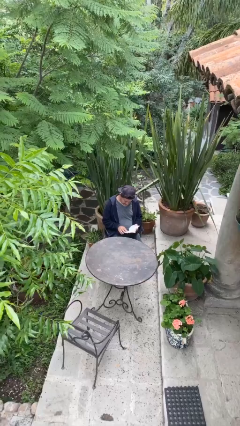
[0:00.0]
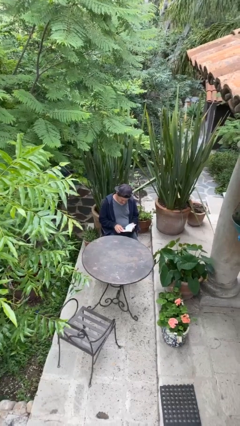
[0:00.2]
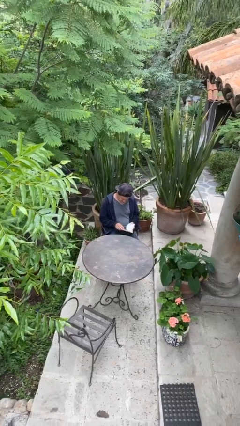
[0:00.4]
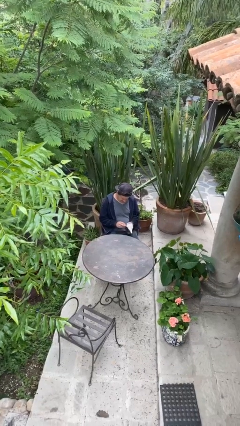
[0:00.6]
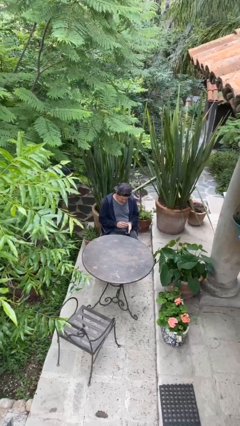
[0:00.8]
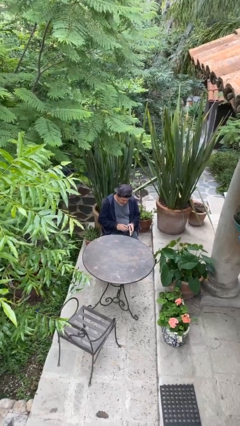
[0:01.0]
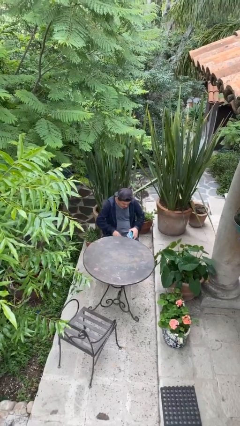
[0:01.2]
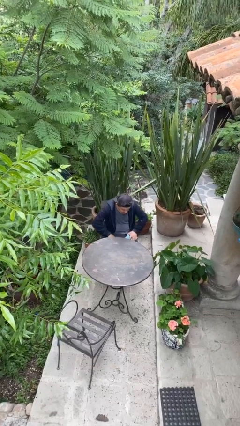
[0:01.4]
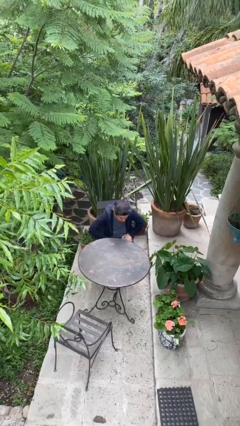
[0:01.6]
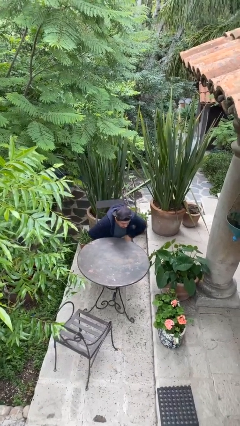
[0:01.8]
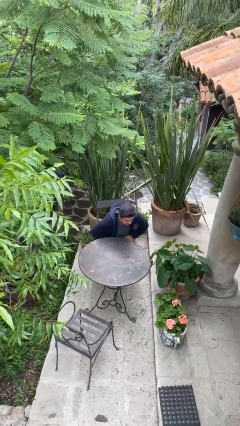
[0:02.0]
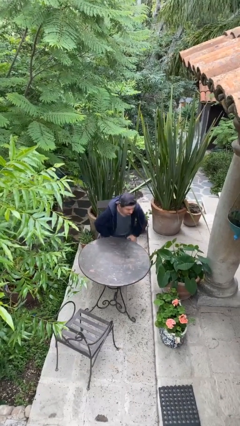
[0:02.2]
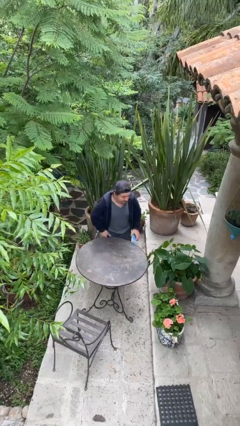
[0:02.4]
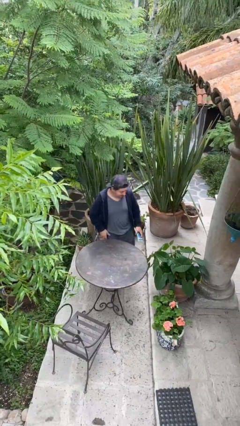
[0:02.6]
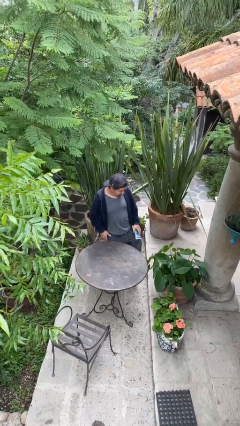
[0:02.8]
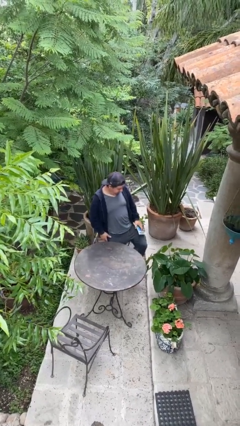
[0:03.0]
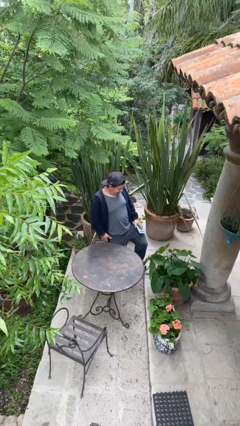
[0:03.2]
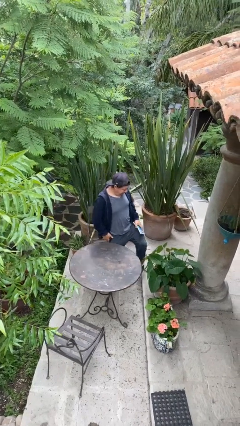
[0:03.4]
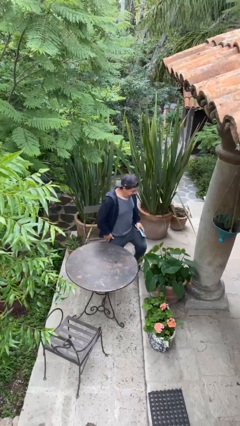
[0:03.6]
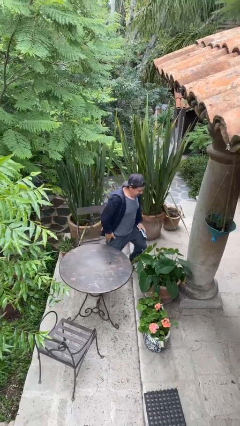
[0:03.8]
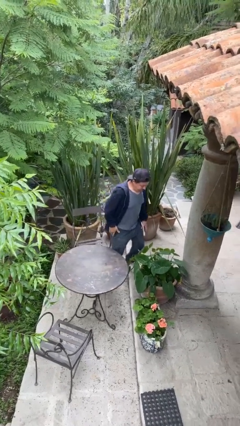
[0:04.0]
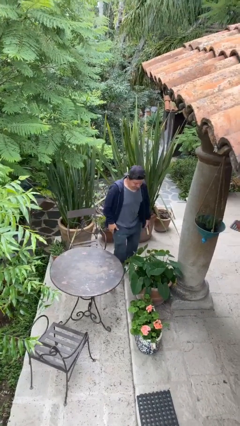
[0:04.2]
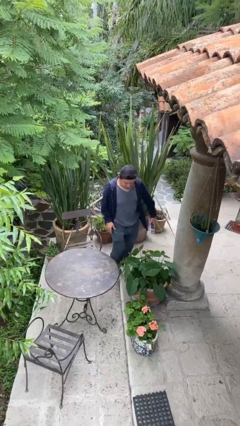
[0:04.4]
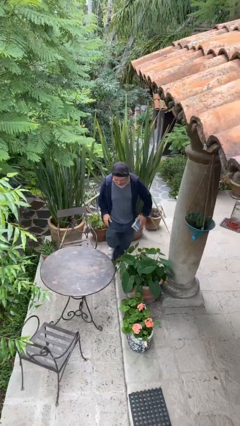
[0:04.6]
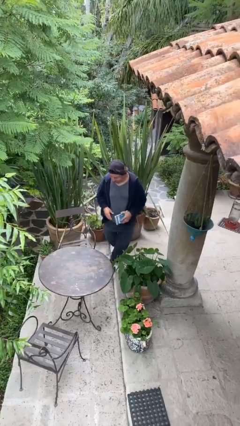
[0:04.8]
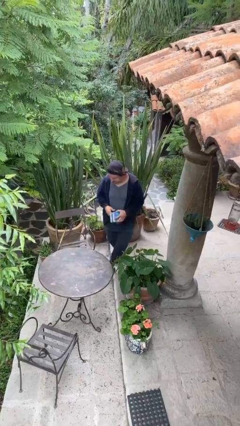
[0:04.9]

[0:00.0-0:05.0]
person stands up

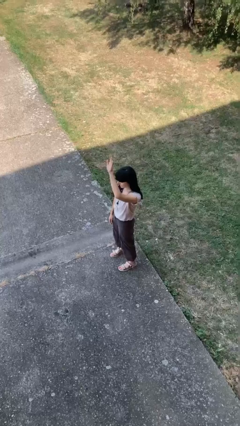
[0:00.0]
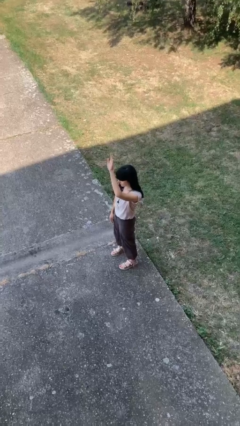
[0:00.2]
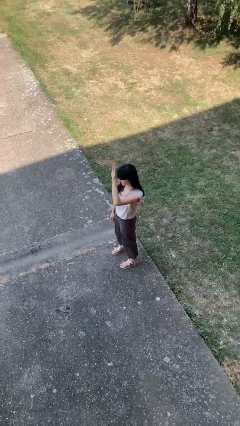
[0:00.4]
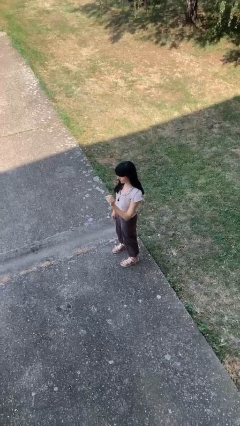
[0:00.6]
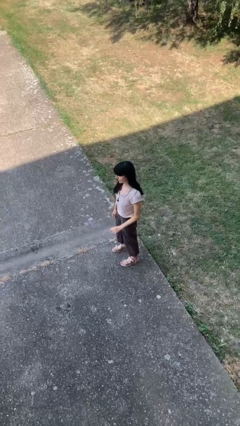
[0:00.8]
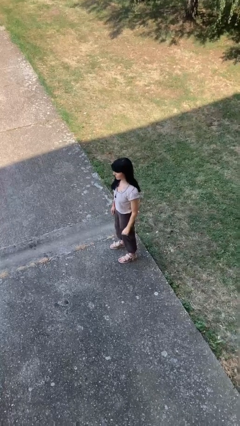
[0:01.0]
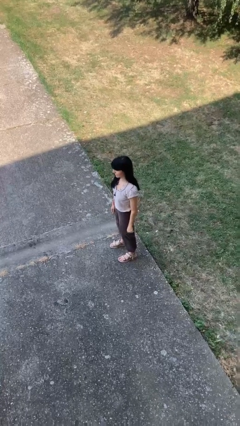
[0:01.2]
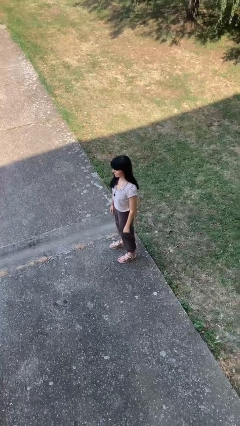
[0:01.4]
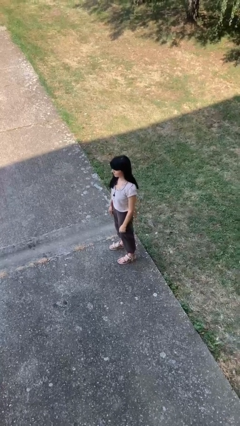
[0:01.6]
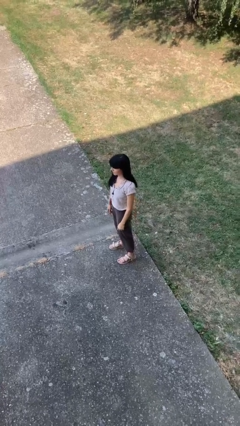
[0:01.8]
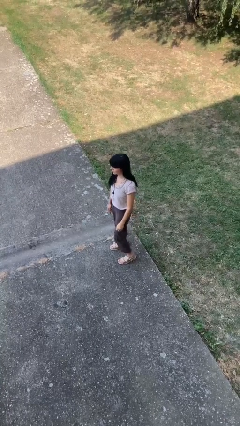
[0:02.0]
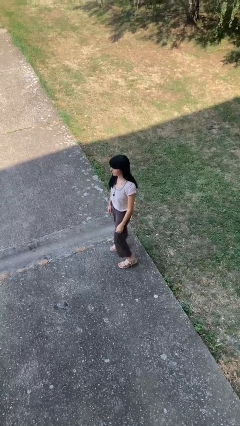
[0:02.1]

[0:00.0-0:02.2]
person gestures lower hand

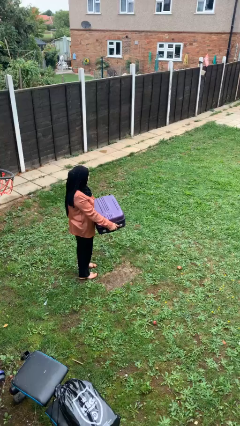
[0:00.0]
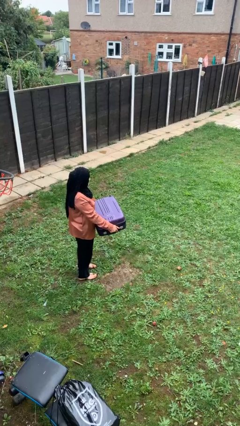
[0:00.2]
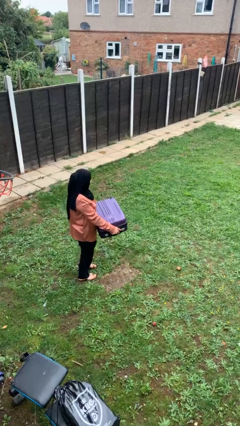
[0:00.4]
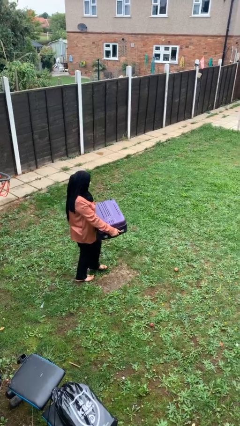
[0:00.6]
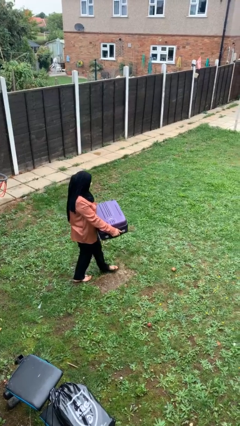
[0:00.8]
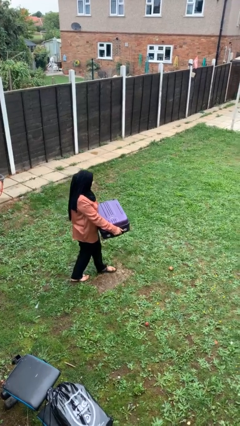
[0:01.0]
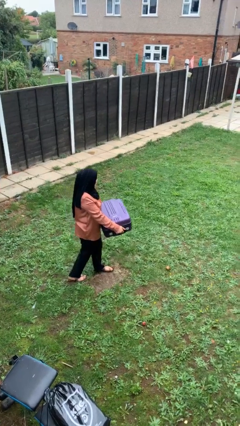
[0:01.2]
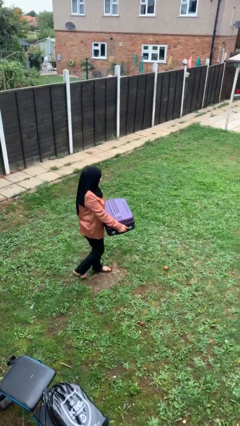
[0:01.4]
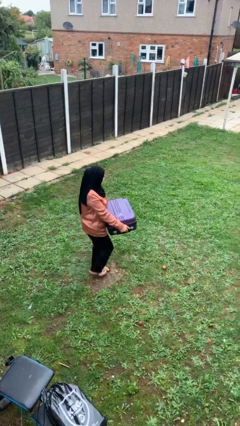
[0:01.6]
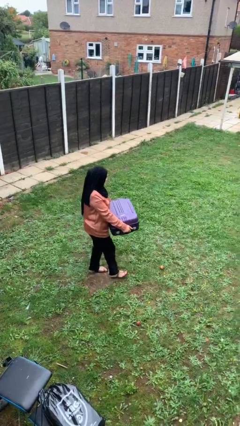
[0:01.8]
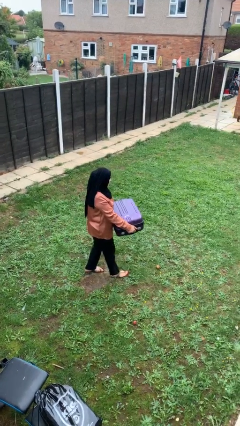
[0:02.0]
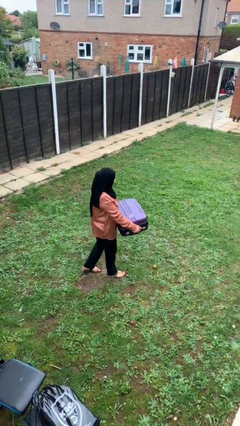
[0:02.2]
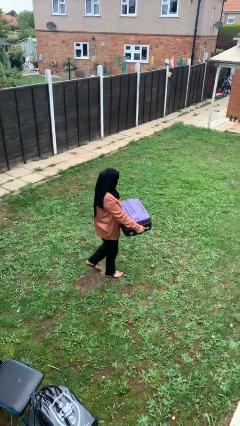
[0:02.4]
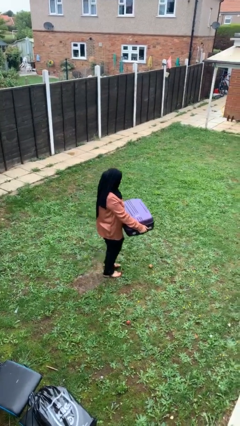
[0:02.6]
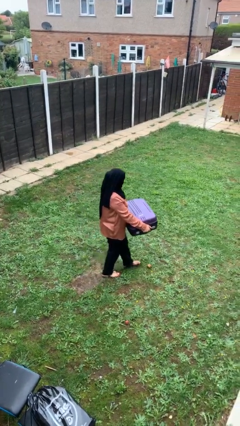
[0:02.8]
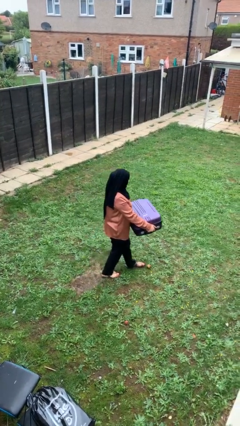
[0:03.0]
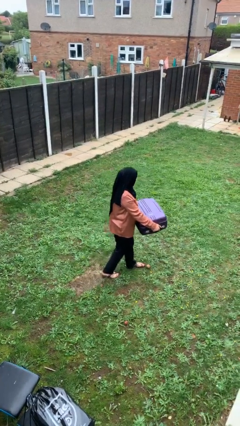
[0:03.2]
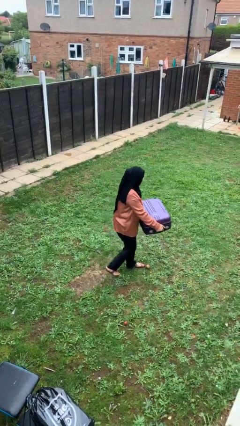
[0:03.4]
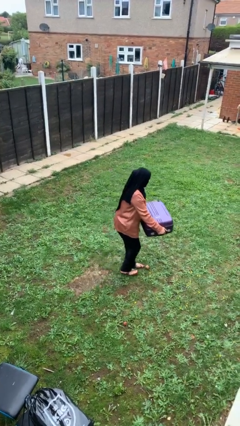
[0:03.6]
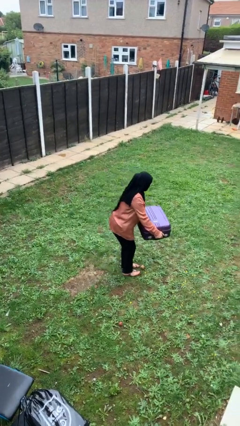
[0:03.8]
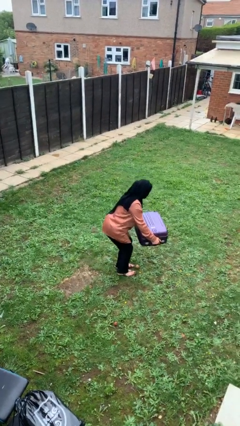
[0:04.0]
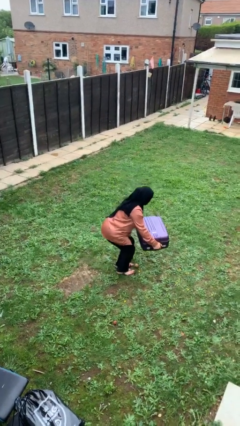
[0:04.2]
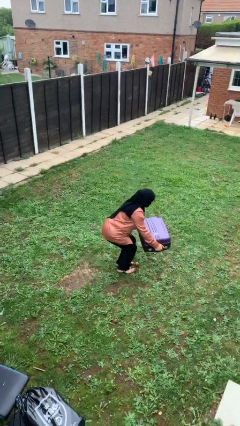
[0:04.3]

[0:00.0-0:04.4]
person carries heavy object

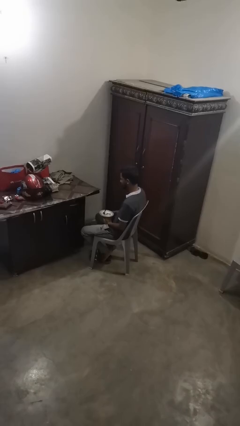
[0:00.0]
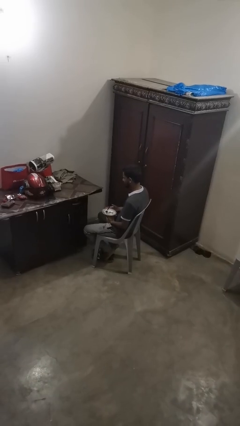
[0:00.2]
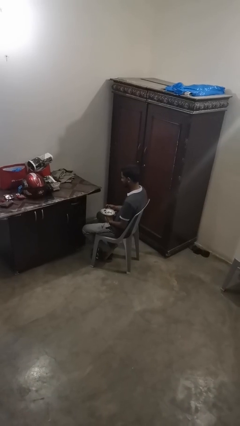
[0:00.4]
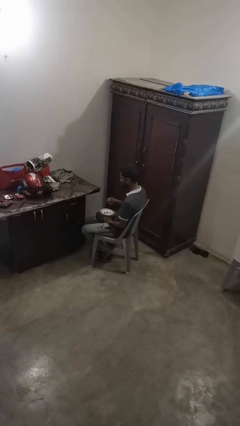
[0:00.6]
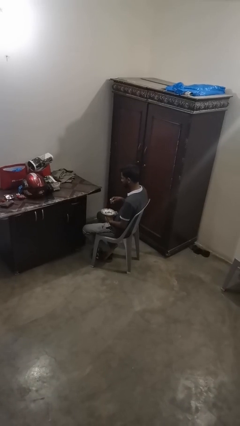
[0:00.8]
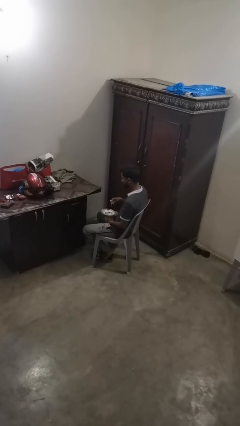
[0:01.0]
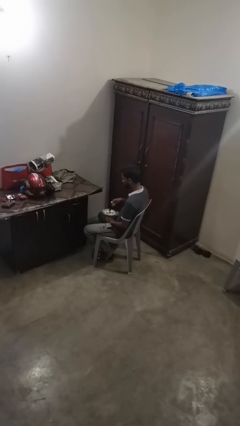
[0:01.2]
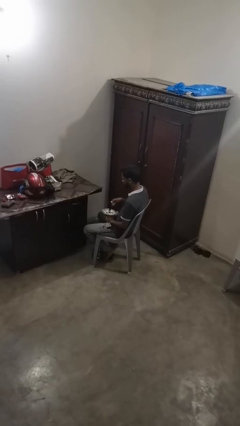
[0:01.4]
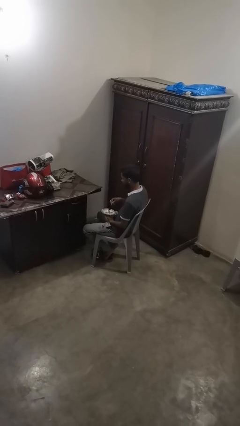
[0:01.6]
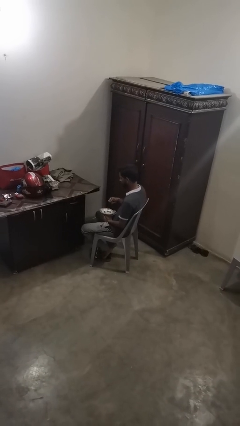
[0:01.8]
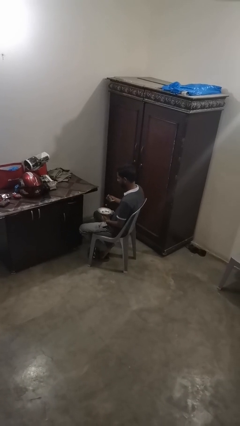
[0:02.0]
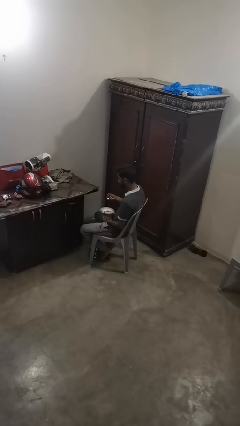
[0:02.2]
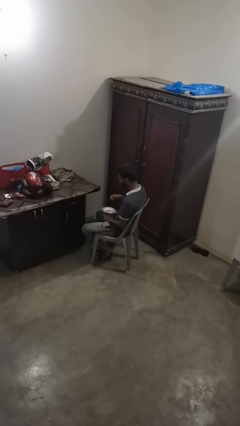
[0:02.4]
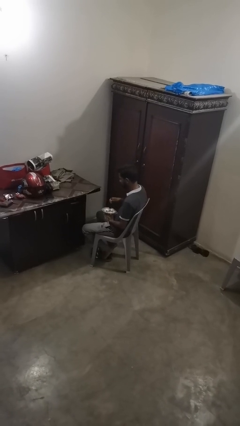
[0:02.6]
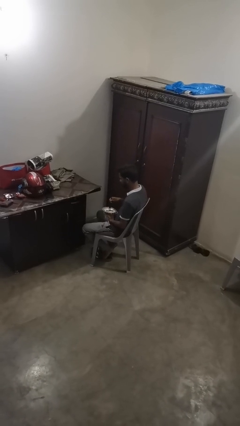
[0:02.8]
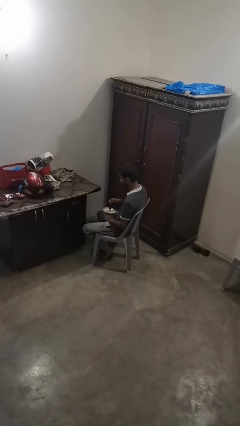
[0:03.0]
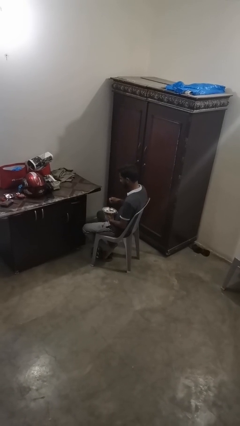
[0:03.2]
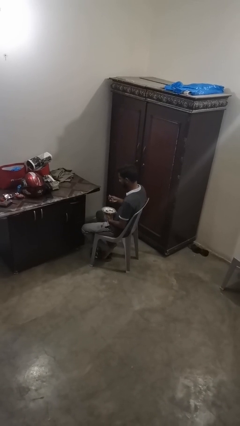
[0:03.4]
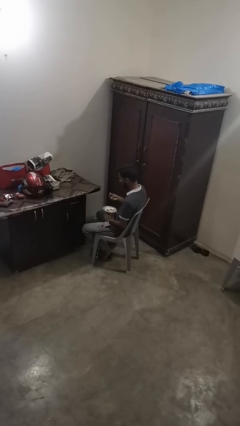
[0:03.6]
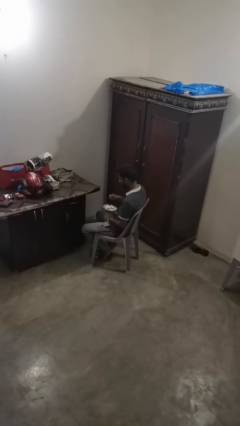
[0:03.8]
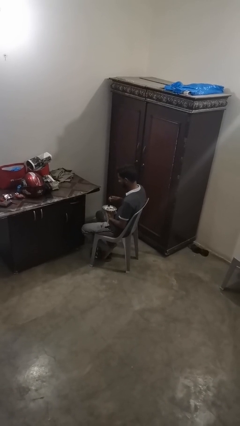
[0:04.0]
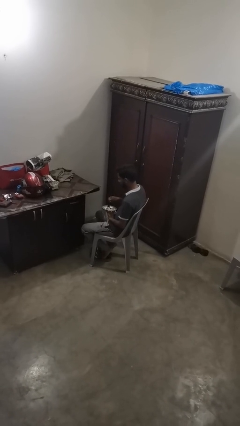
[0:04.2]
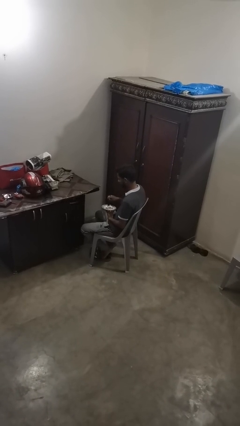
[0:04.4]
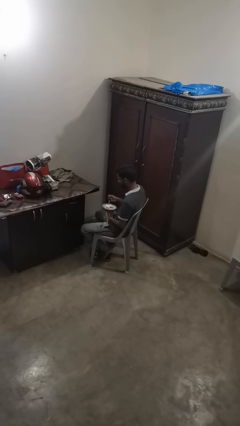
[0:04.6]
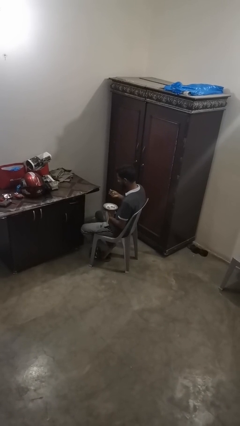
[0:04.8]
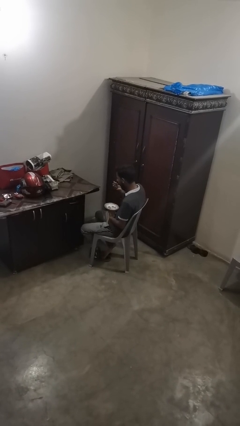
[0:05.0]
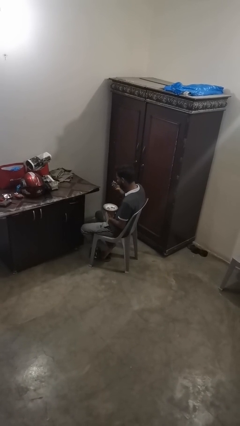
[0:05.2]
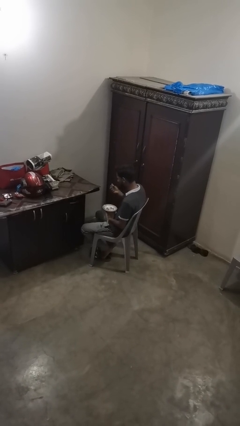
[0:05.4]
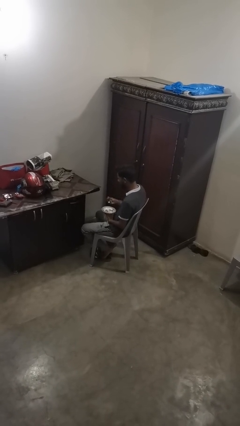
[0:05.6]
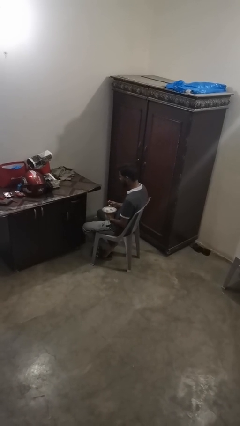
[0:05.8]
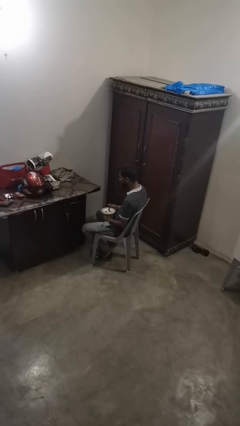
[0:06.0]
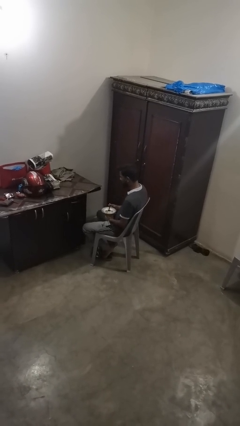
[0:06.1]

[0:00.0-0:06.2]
person eats with utensil

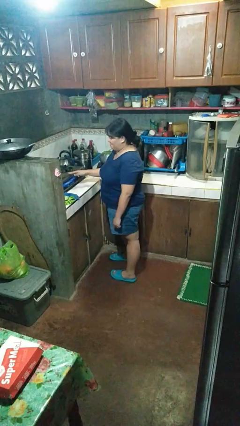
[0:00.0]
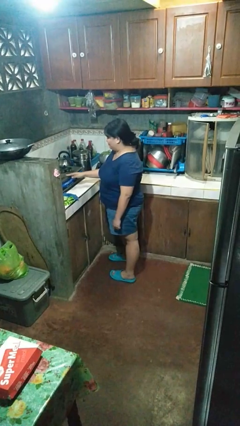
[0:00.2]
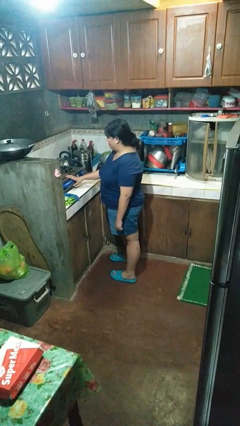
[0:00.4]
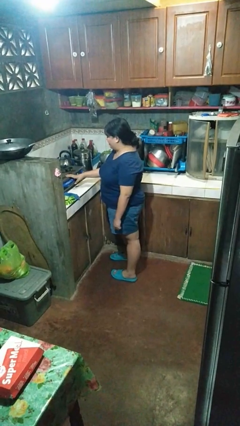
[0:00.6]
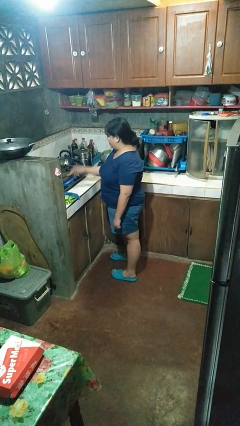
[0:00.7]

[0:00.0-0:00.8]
person burns hand
